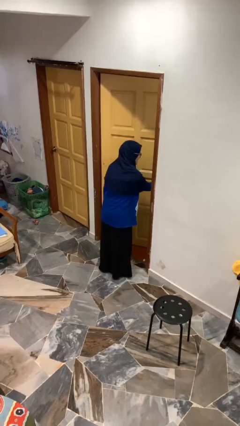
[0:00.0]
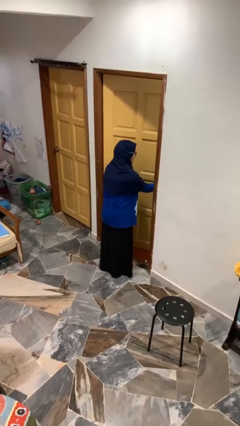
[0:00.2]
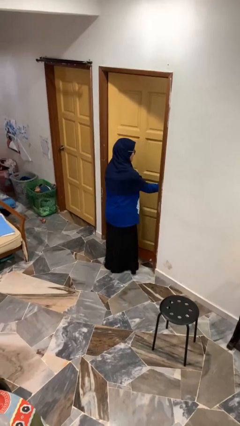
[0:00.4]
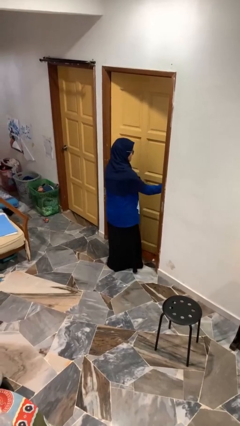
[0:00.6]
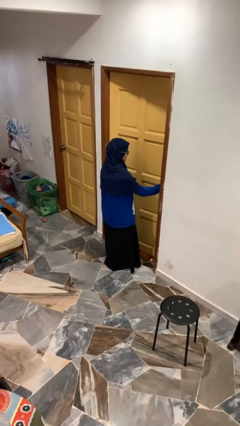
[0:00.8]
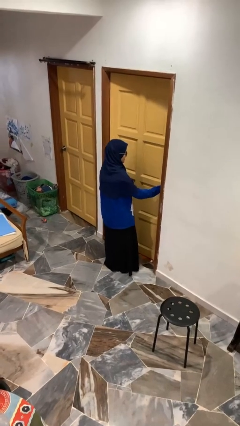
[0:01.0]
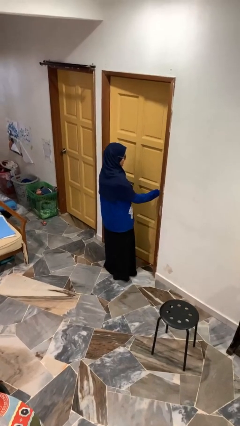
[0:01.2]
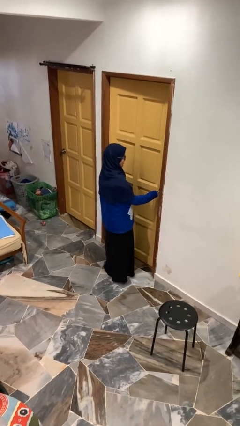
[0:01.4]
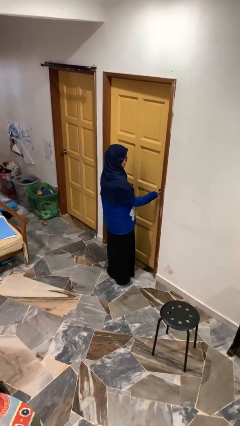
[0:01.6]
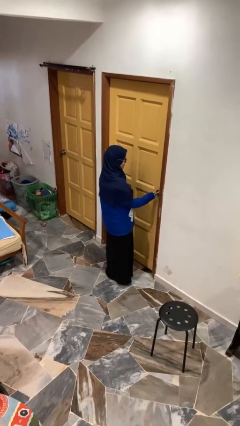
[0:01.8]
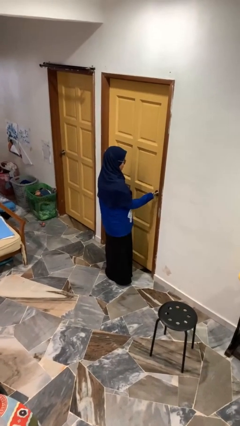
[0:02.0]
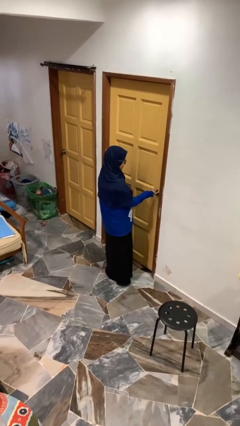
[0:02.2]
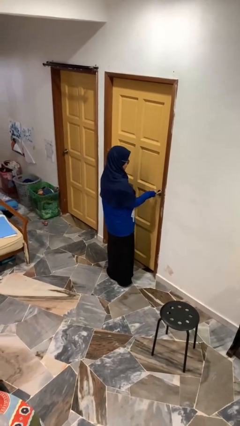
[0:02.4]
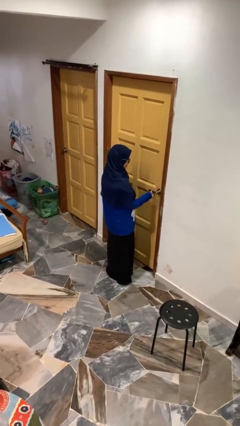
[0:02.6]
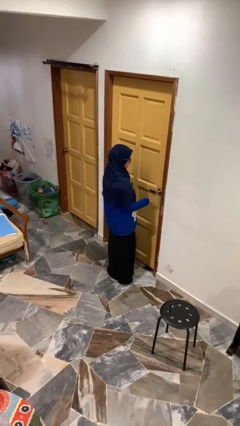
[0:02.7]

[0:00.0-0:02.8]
person closes facility door

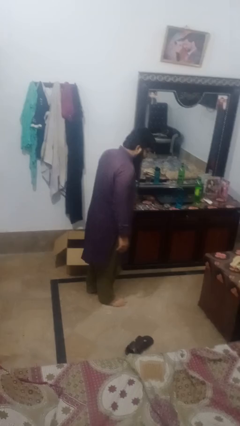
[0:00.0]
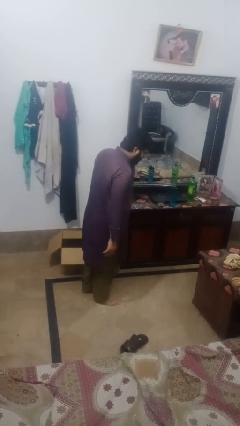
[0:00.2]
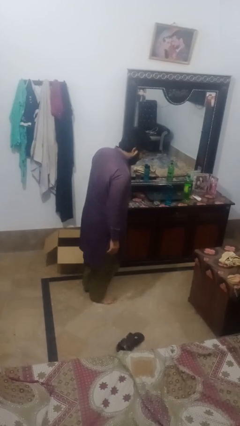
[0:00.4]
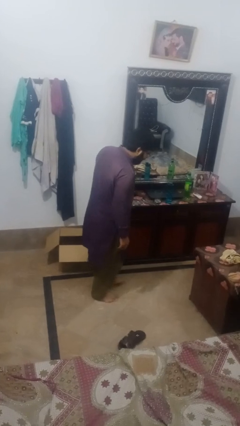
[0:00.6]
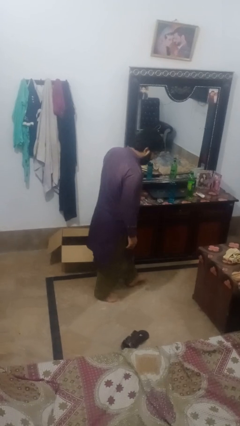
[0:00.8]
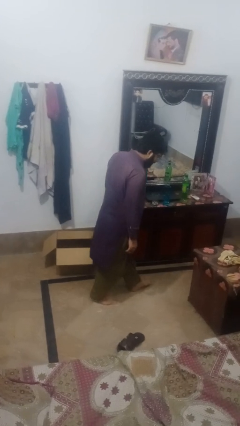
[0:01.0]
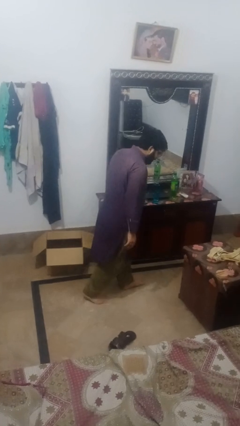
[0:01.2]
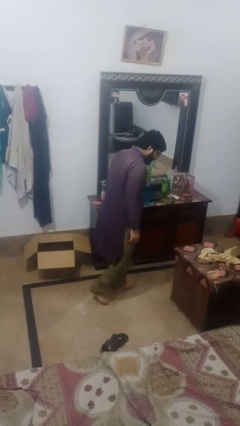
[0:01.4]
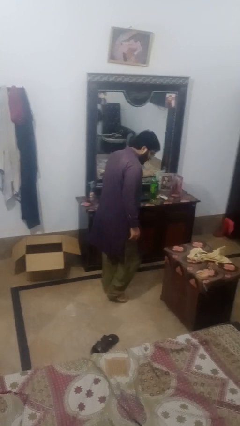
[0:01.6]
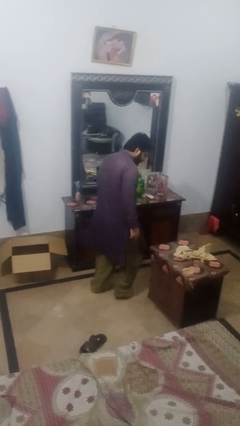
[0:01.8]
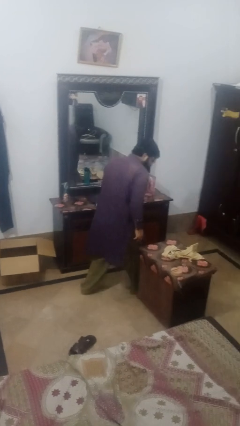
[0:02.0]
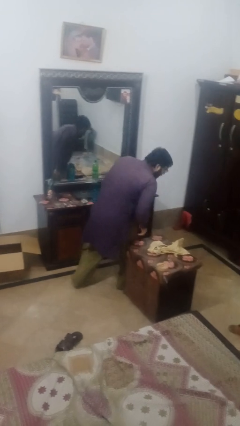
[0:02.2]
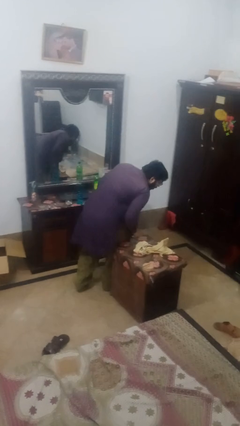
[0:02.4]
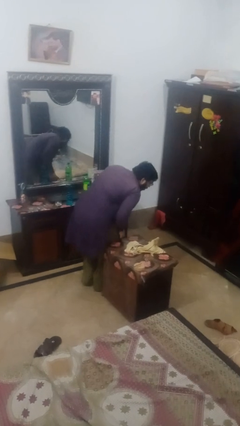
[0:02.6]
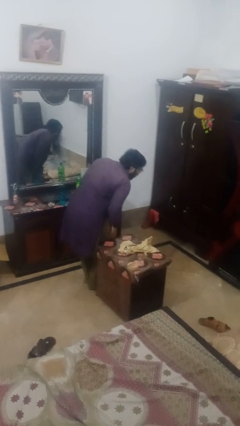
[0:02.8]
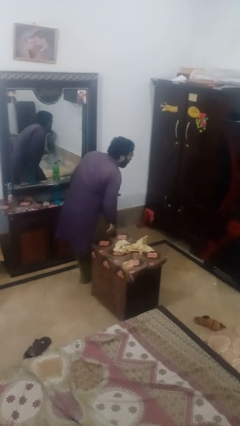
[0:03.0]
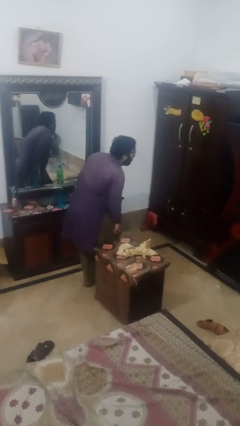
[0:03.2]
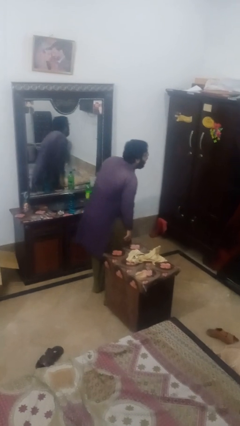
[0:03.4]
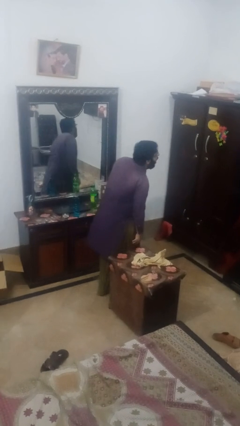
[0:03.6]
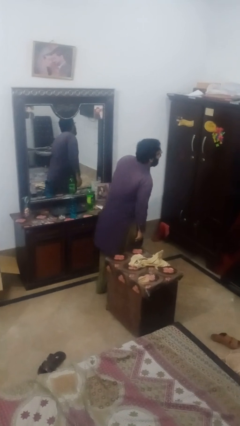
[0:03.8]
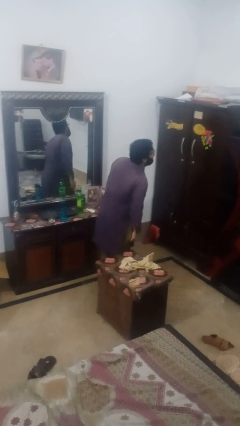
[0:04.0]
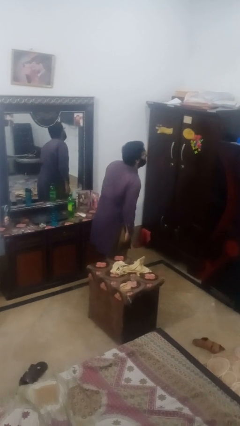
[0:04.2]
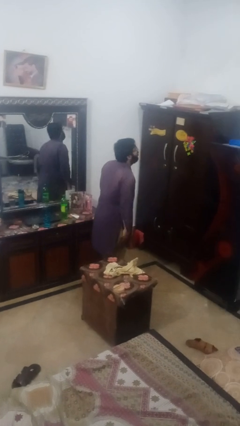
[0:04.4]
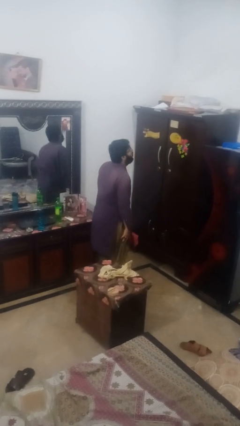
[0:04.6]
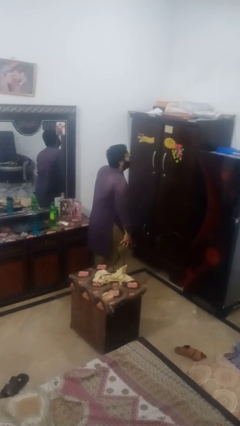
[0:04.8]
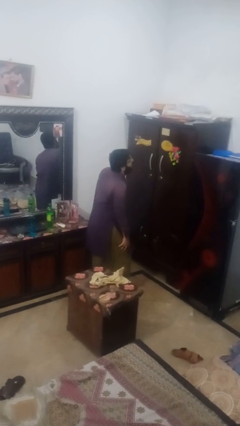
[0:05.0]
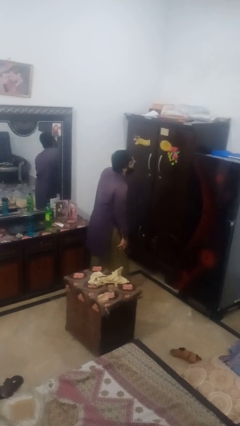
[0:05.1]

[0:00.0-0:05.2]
person bumps into table

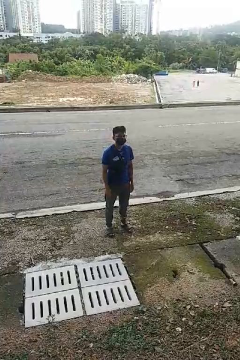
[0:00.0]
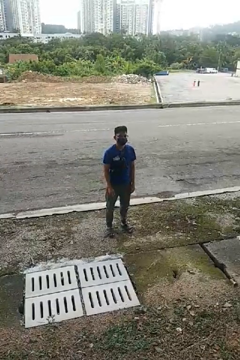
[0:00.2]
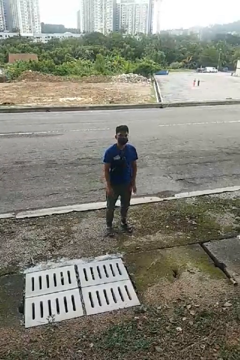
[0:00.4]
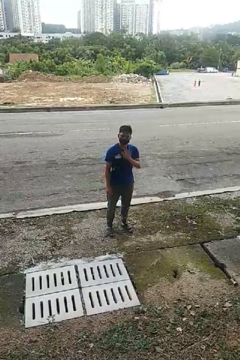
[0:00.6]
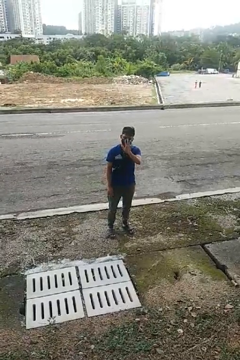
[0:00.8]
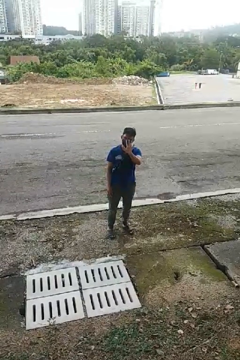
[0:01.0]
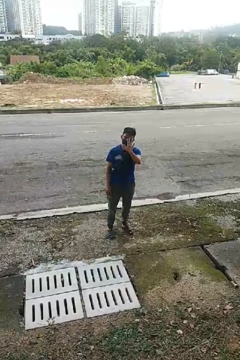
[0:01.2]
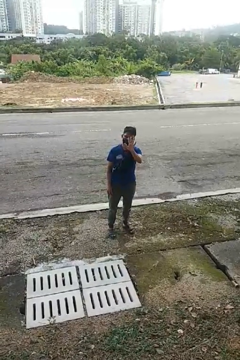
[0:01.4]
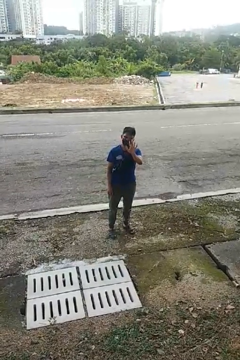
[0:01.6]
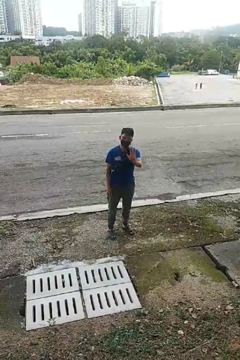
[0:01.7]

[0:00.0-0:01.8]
person gestures stop

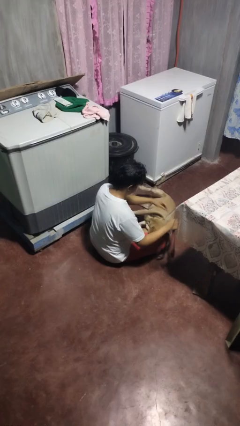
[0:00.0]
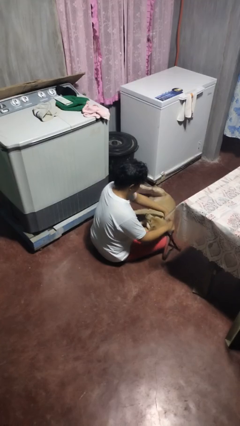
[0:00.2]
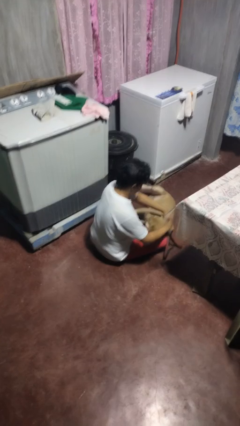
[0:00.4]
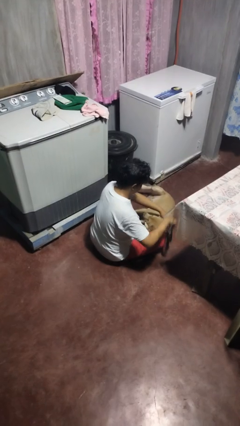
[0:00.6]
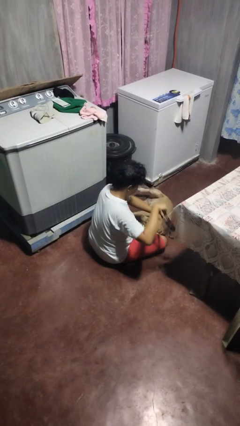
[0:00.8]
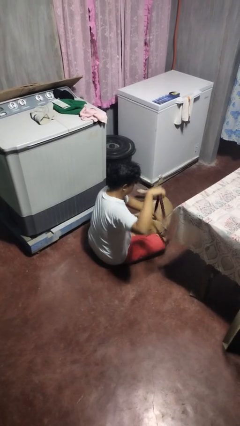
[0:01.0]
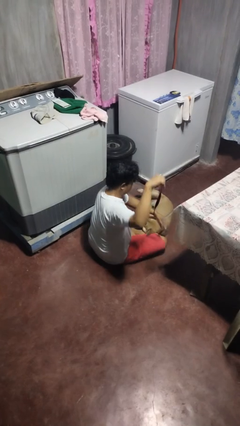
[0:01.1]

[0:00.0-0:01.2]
person attaches leash to dog

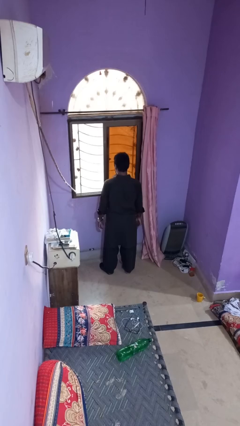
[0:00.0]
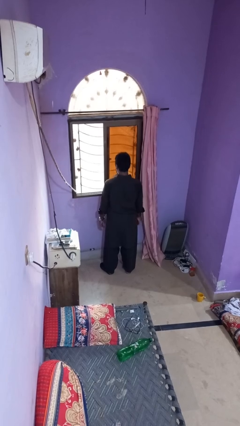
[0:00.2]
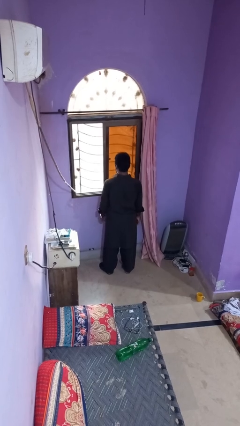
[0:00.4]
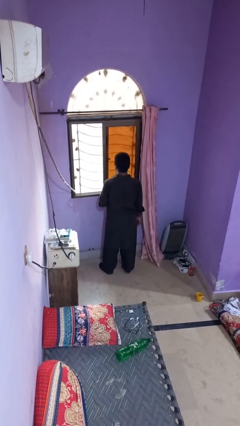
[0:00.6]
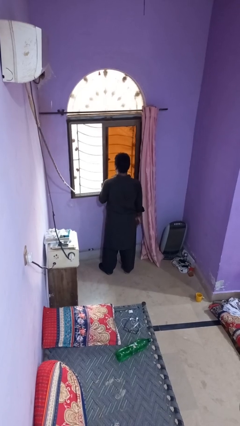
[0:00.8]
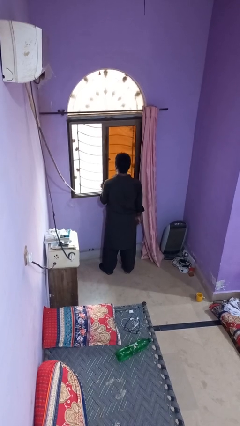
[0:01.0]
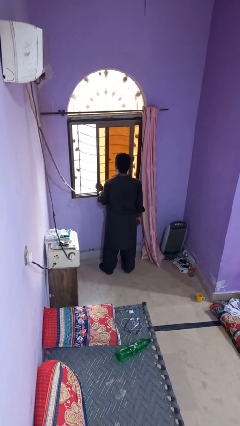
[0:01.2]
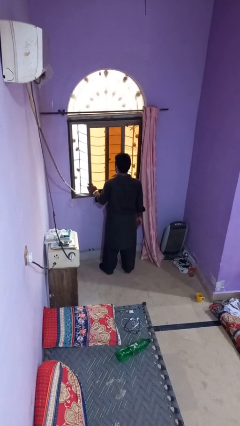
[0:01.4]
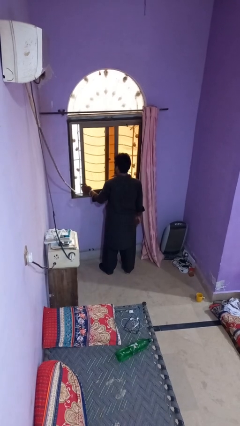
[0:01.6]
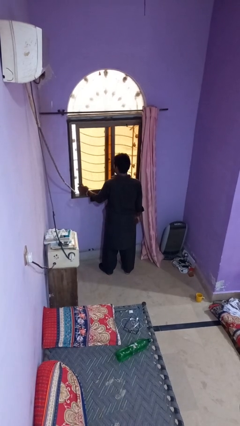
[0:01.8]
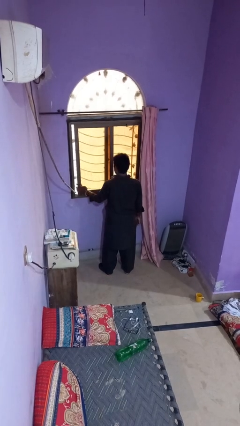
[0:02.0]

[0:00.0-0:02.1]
person closes home window

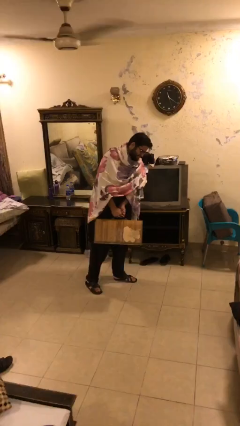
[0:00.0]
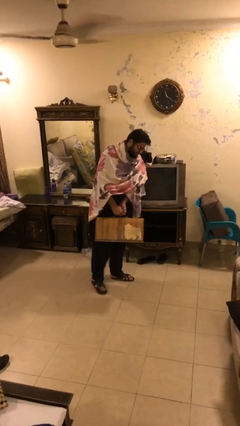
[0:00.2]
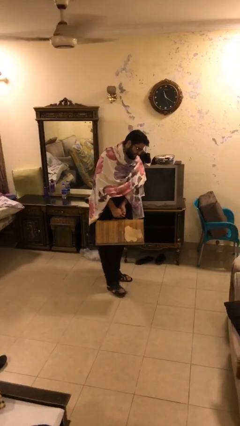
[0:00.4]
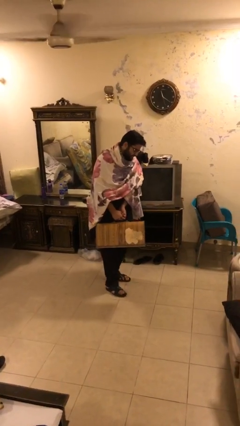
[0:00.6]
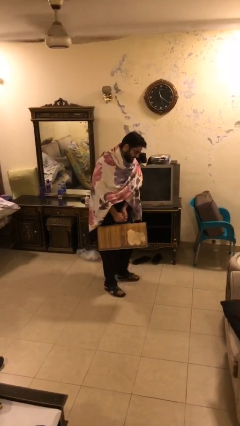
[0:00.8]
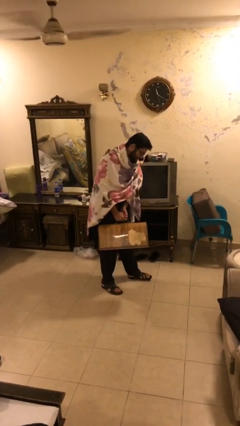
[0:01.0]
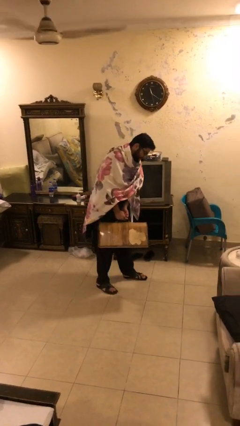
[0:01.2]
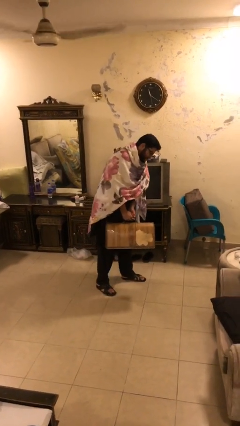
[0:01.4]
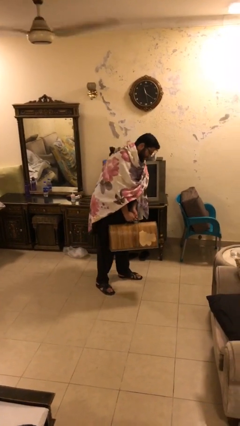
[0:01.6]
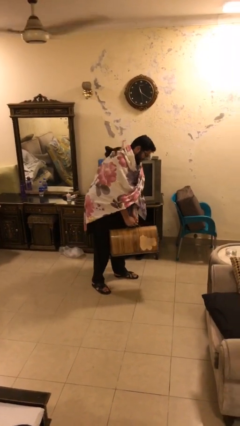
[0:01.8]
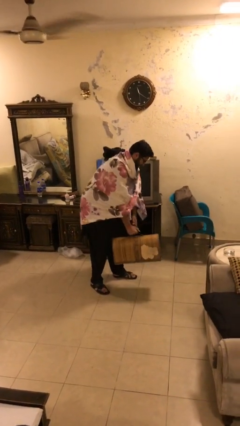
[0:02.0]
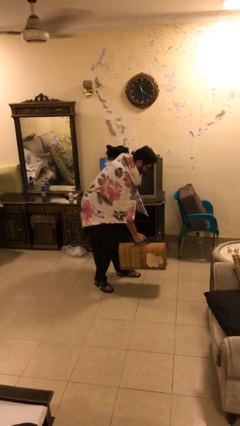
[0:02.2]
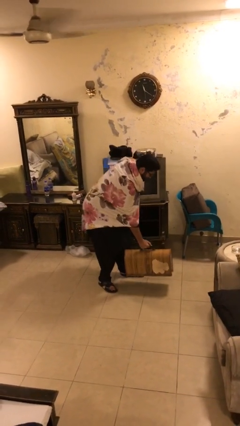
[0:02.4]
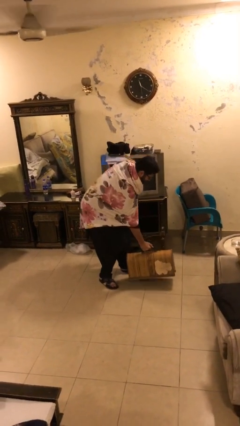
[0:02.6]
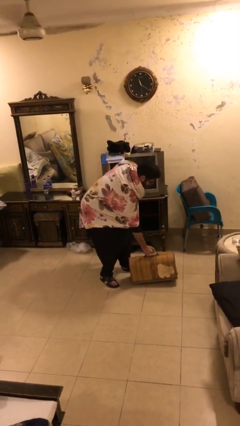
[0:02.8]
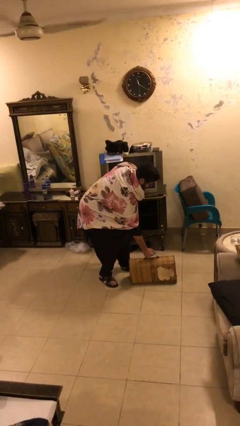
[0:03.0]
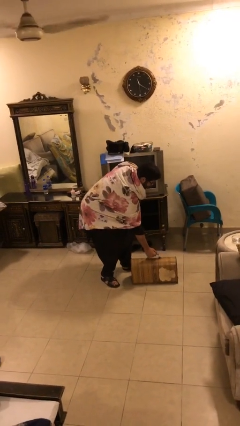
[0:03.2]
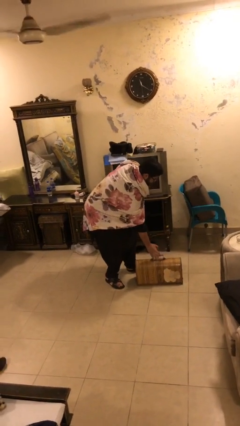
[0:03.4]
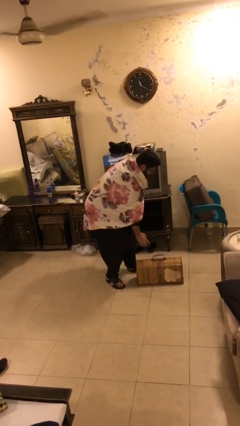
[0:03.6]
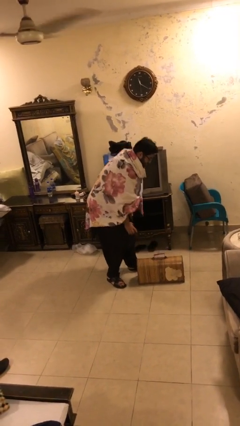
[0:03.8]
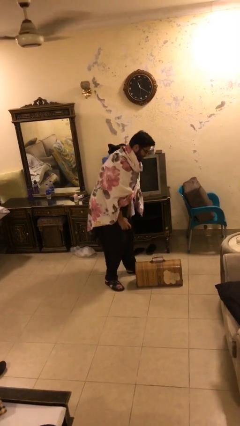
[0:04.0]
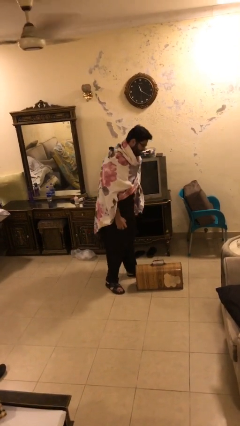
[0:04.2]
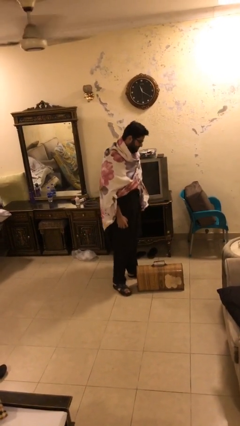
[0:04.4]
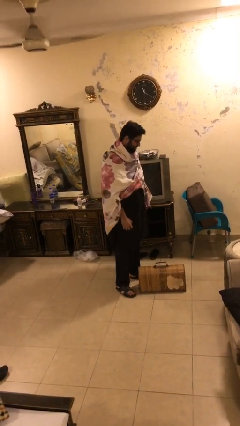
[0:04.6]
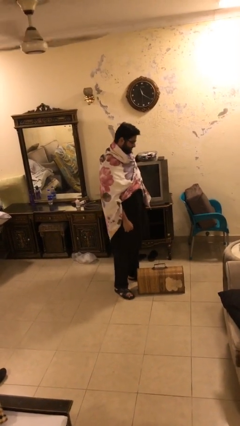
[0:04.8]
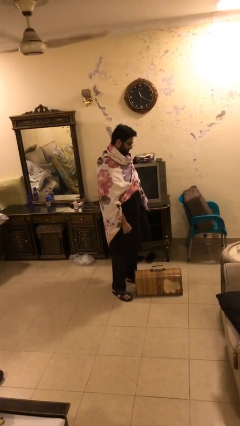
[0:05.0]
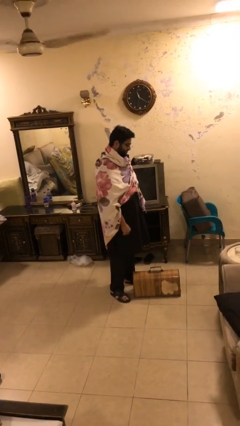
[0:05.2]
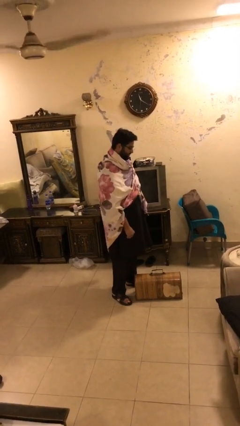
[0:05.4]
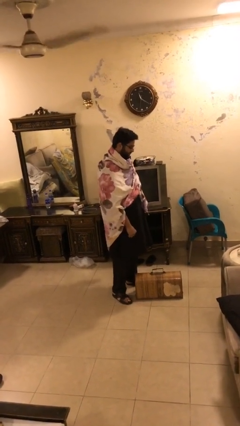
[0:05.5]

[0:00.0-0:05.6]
person puts down object on floor
